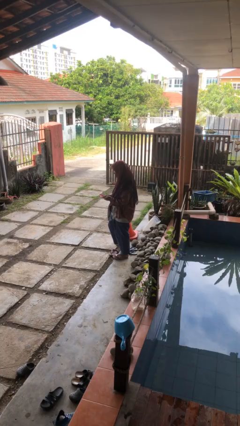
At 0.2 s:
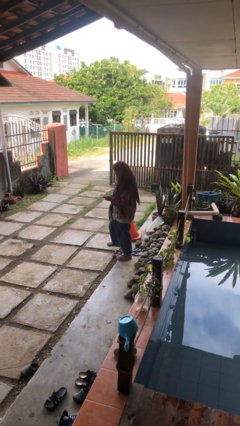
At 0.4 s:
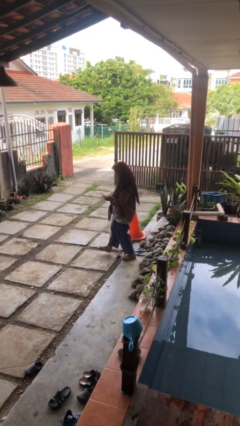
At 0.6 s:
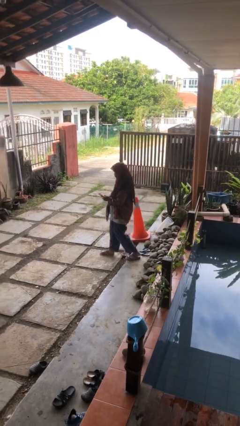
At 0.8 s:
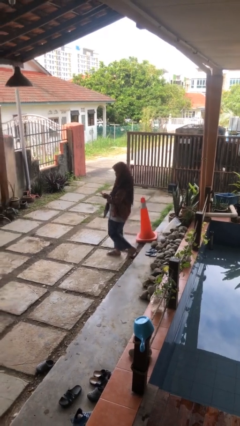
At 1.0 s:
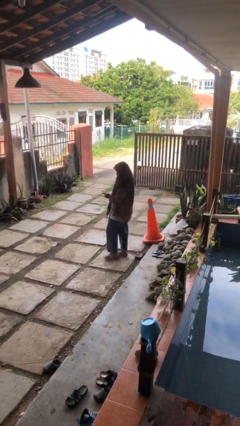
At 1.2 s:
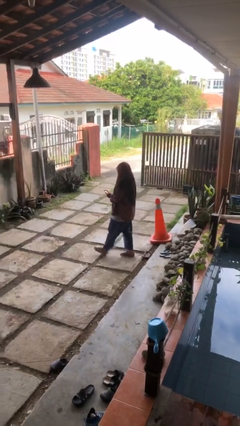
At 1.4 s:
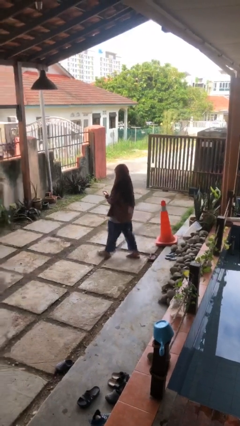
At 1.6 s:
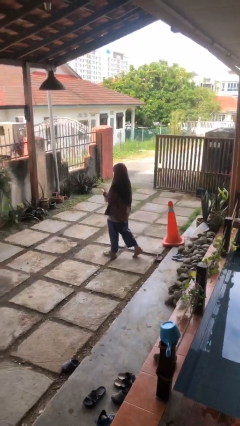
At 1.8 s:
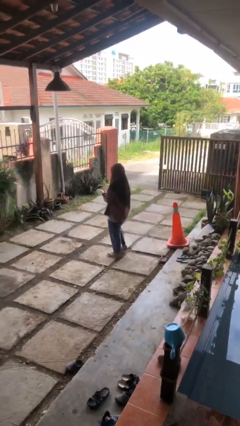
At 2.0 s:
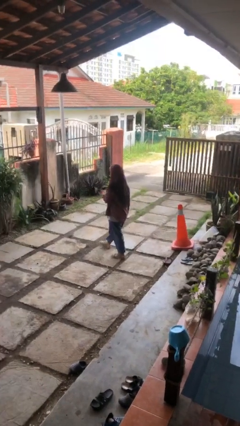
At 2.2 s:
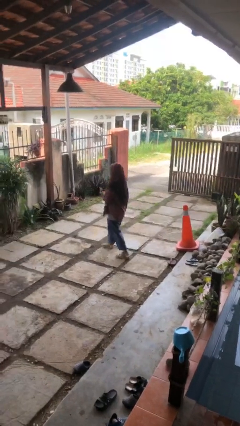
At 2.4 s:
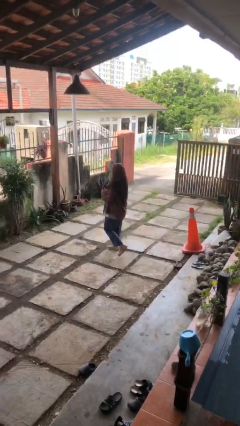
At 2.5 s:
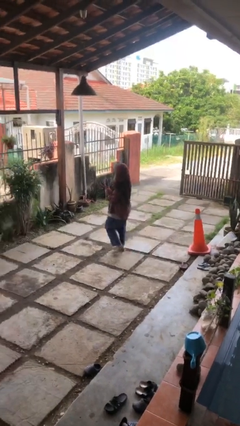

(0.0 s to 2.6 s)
person texts on phone

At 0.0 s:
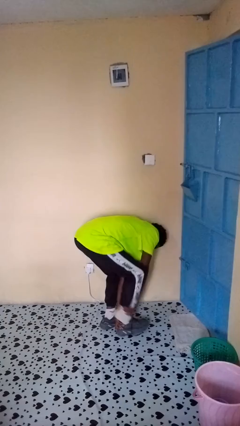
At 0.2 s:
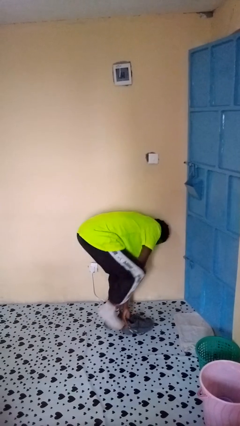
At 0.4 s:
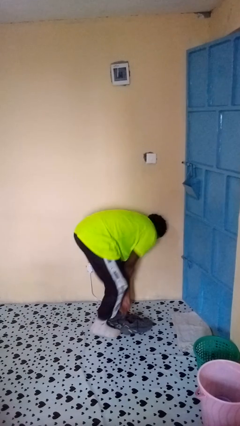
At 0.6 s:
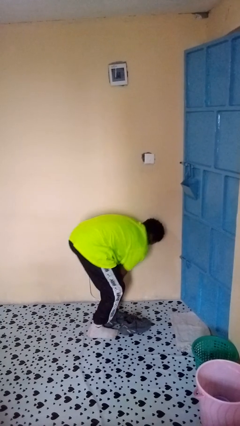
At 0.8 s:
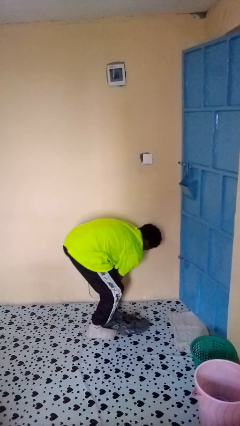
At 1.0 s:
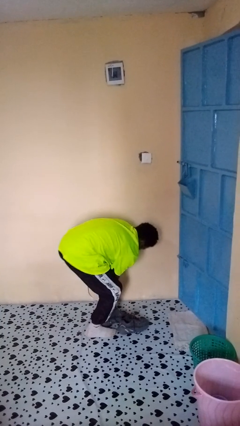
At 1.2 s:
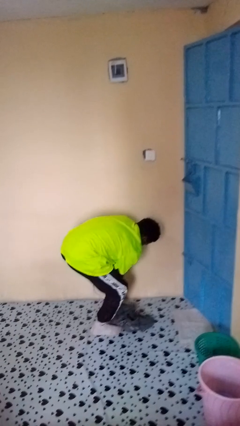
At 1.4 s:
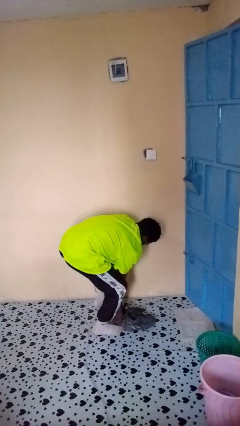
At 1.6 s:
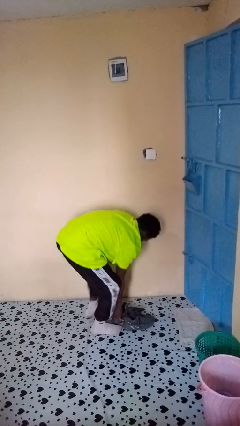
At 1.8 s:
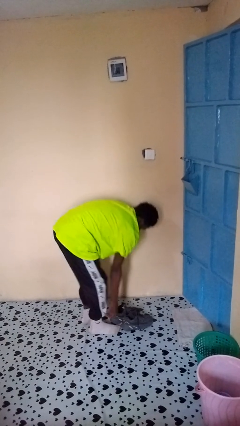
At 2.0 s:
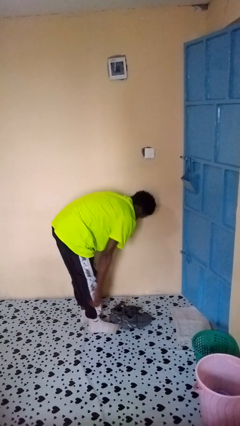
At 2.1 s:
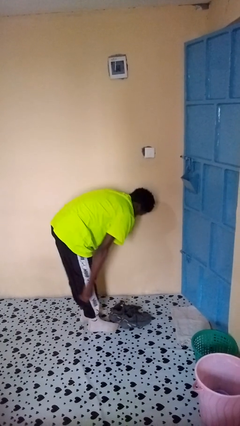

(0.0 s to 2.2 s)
person takes off shoes

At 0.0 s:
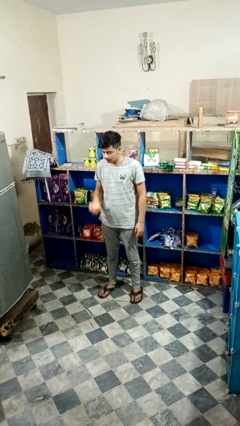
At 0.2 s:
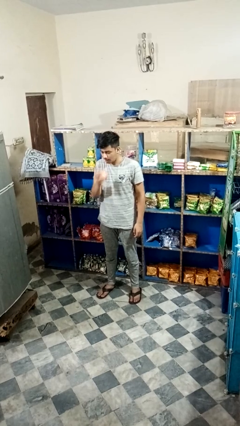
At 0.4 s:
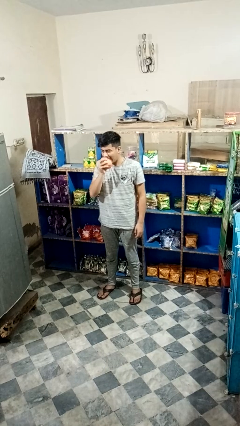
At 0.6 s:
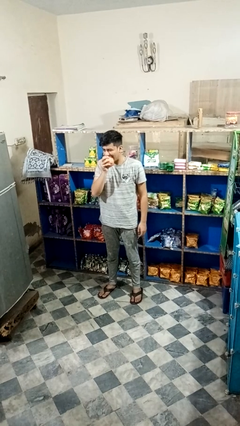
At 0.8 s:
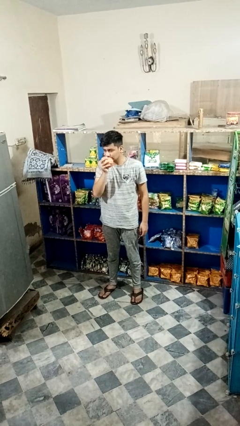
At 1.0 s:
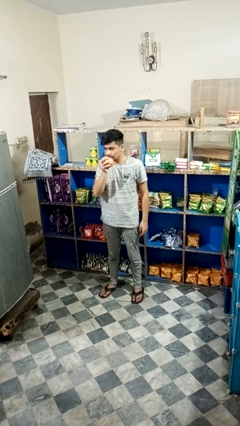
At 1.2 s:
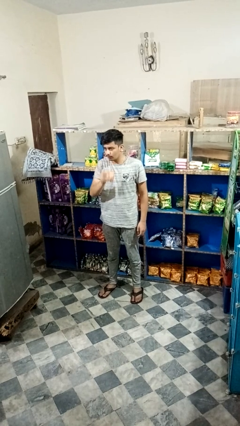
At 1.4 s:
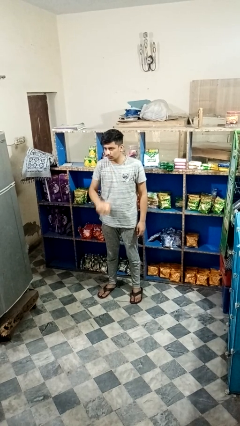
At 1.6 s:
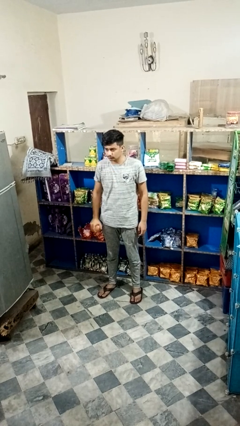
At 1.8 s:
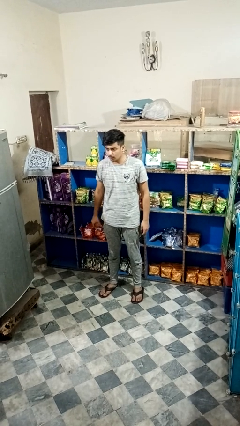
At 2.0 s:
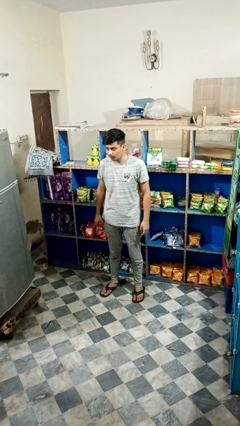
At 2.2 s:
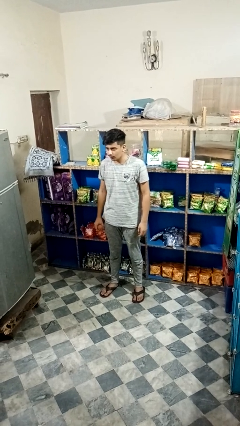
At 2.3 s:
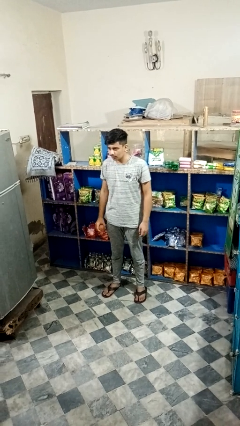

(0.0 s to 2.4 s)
person eats apple

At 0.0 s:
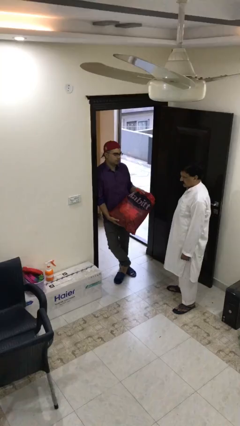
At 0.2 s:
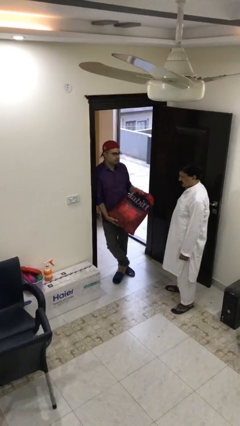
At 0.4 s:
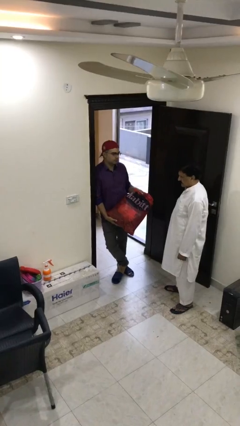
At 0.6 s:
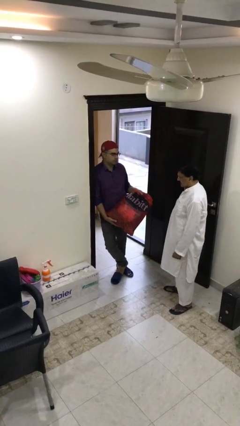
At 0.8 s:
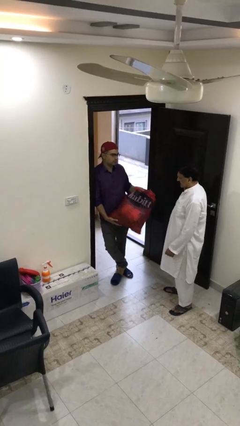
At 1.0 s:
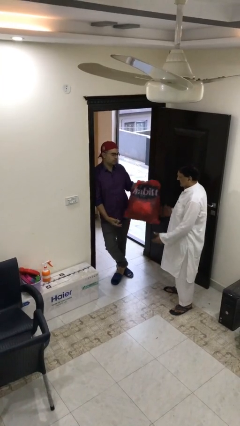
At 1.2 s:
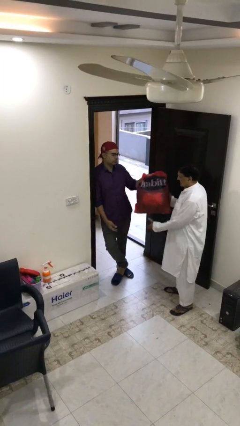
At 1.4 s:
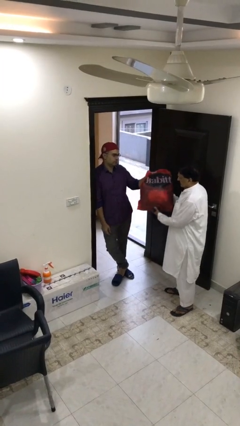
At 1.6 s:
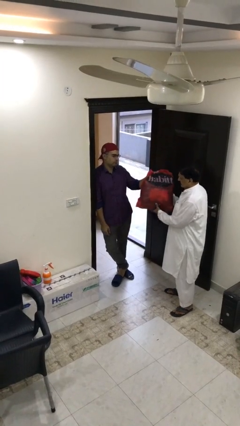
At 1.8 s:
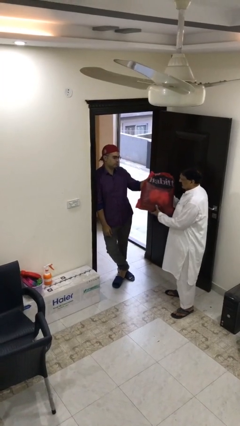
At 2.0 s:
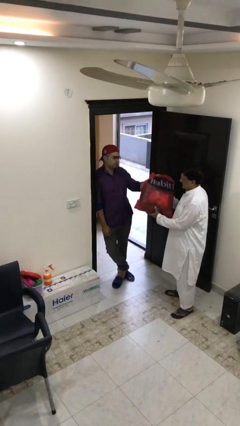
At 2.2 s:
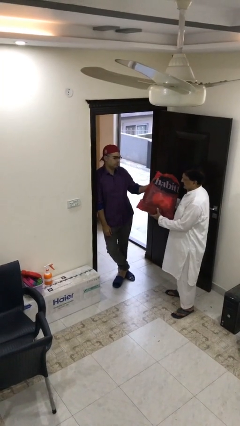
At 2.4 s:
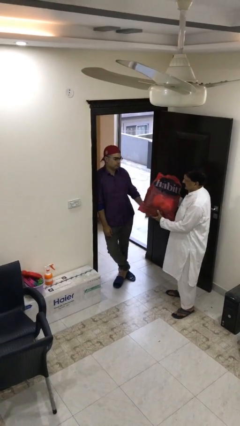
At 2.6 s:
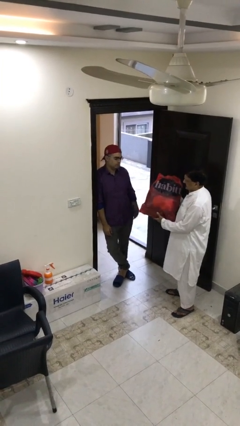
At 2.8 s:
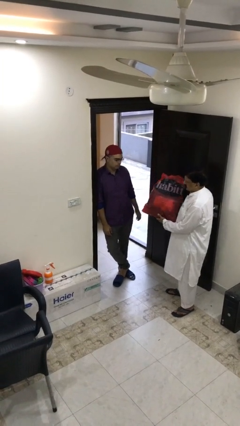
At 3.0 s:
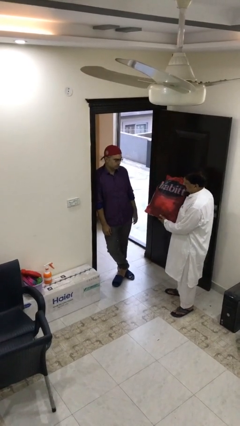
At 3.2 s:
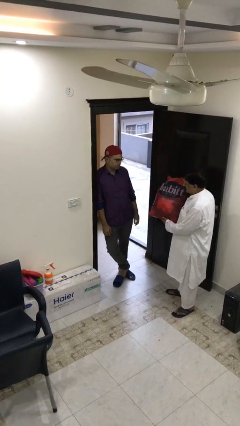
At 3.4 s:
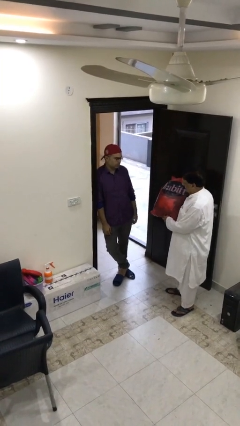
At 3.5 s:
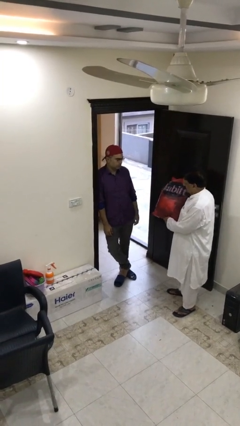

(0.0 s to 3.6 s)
person transfers object to person

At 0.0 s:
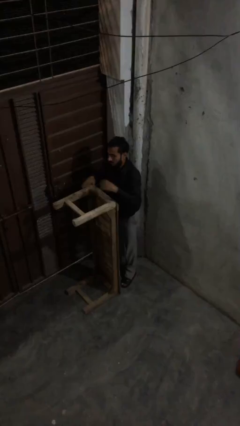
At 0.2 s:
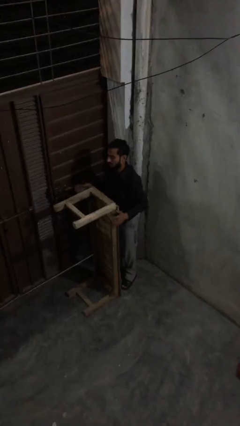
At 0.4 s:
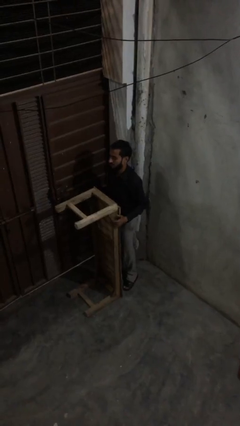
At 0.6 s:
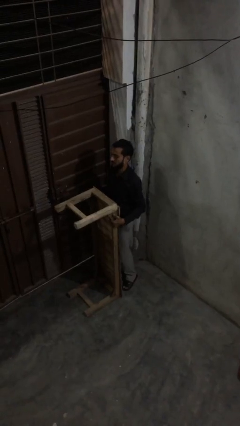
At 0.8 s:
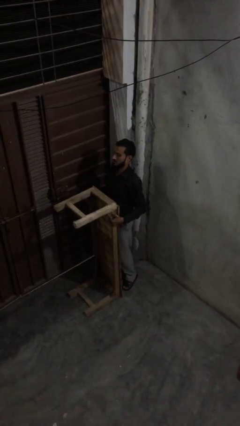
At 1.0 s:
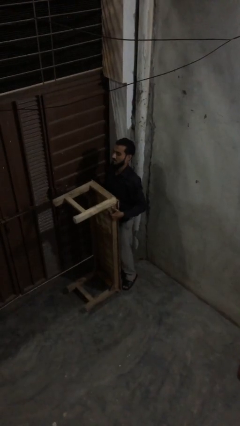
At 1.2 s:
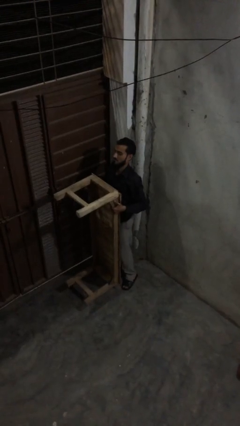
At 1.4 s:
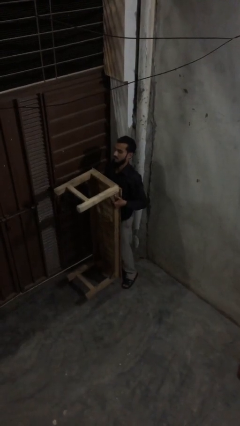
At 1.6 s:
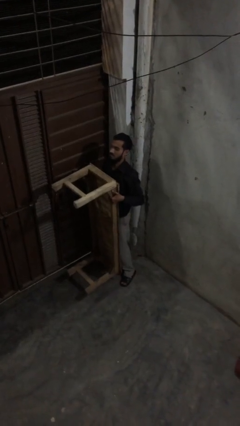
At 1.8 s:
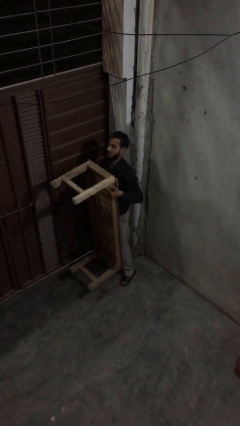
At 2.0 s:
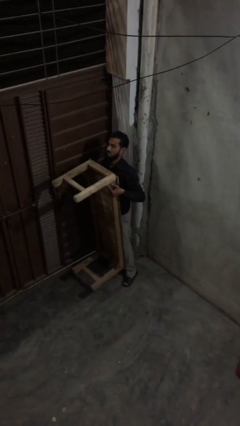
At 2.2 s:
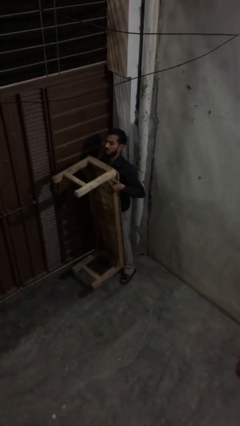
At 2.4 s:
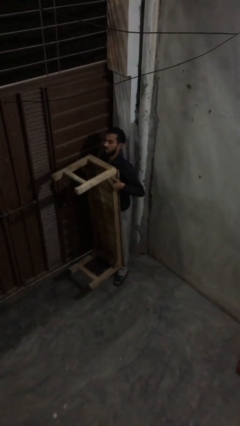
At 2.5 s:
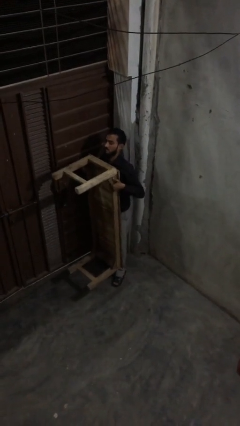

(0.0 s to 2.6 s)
person picks up object from floor

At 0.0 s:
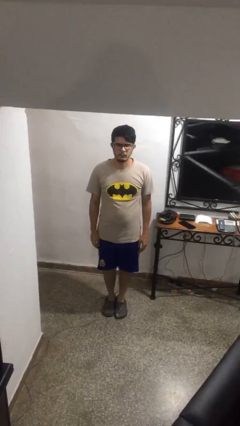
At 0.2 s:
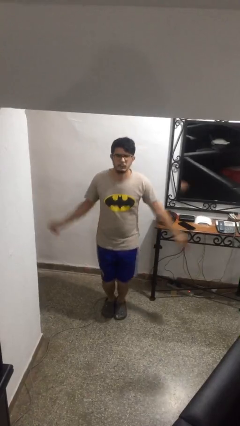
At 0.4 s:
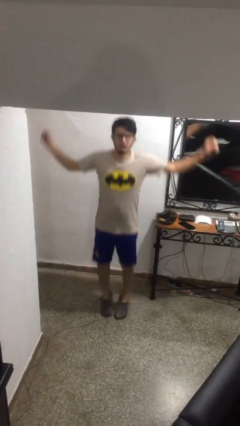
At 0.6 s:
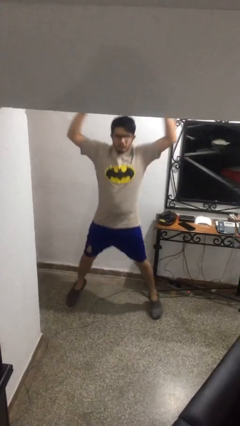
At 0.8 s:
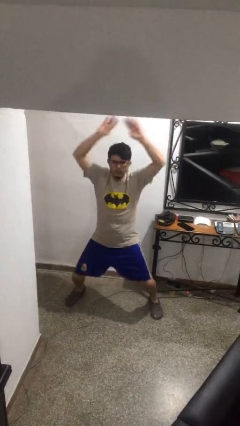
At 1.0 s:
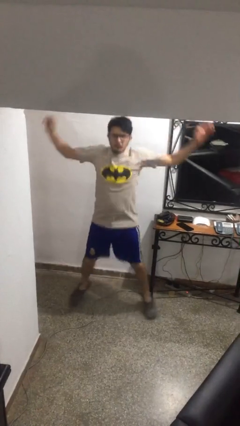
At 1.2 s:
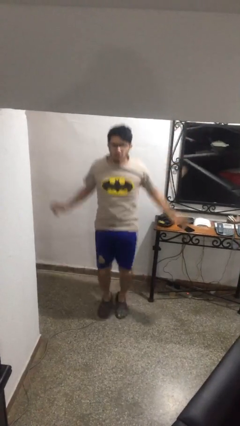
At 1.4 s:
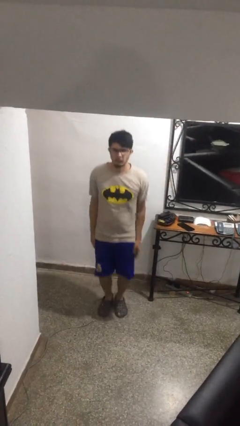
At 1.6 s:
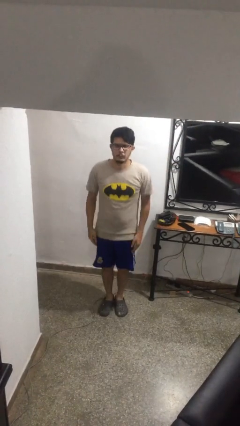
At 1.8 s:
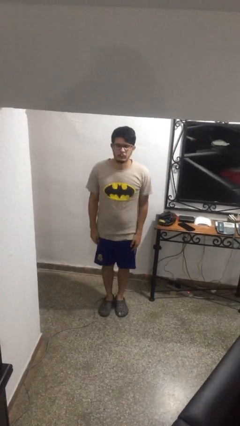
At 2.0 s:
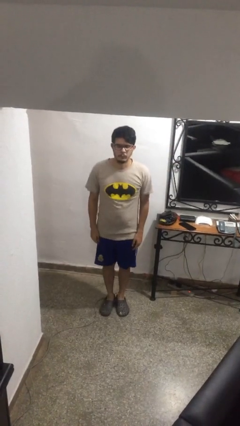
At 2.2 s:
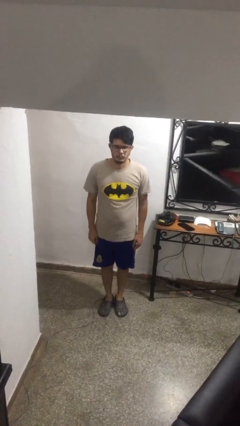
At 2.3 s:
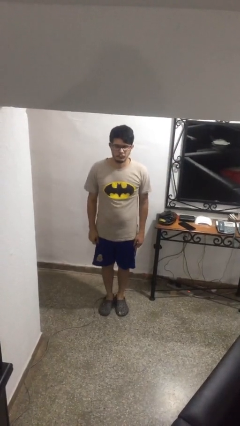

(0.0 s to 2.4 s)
person exercises with jumping jacks

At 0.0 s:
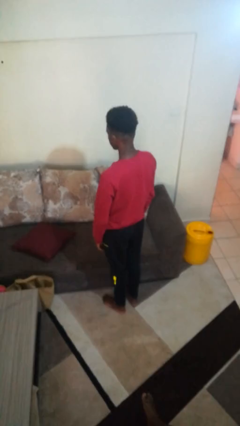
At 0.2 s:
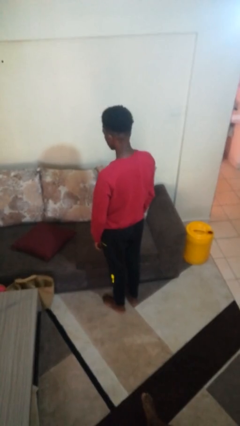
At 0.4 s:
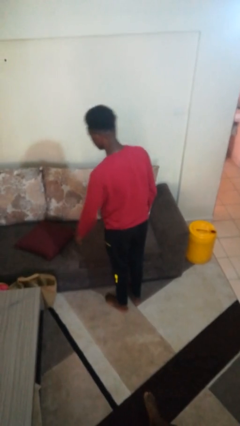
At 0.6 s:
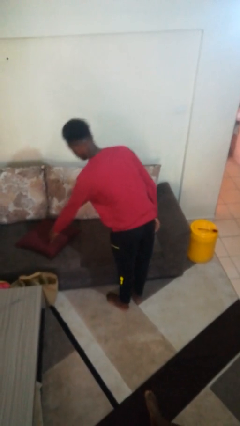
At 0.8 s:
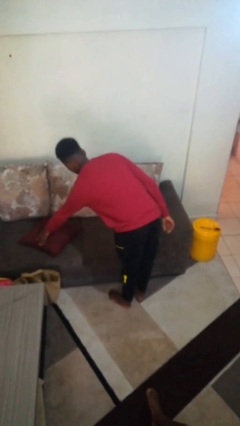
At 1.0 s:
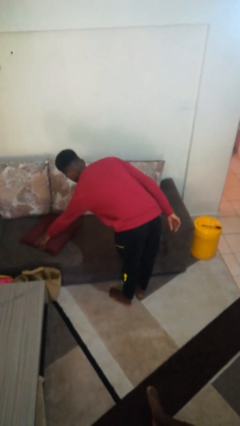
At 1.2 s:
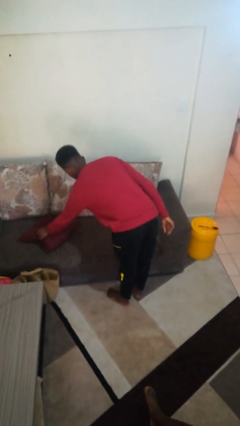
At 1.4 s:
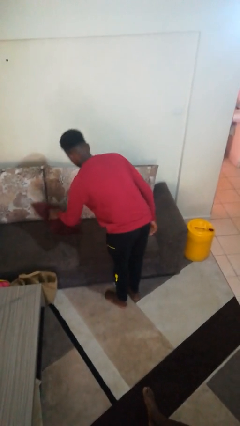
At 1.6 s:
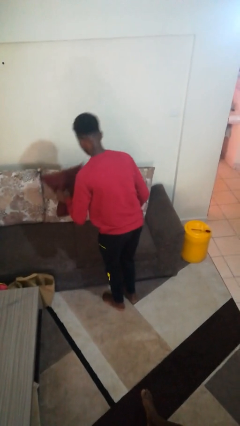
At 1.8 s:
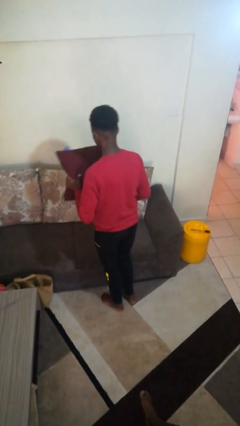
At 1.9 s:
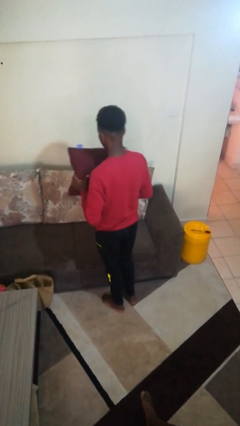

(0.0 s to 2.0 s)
person picks up object from couch
